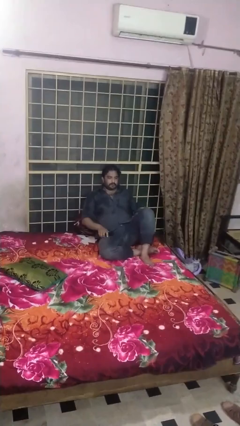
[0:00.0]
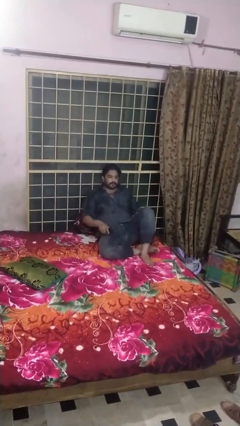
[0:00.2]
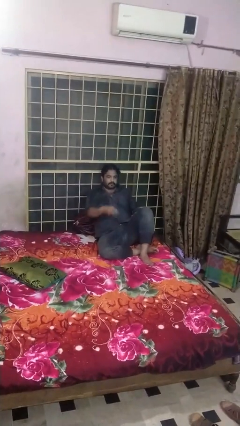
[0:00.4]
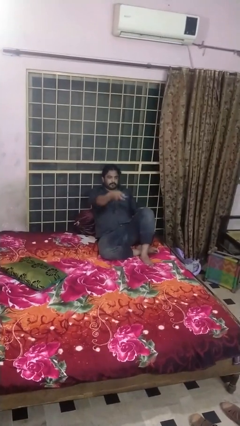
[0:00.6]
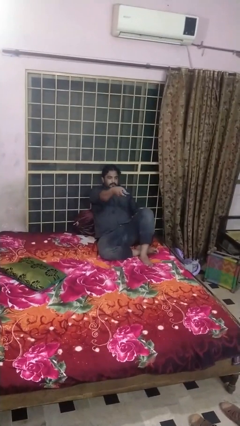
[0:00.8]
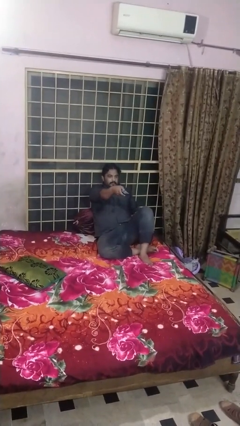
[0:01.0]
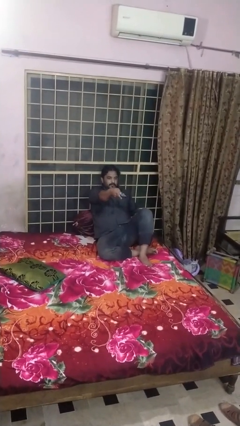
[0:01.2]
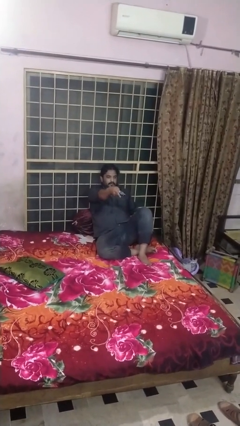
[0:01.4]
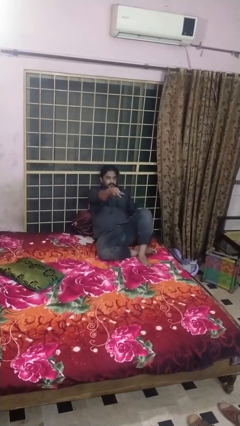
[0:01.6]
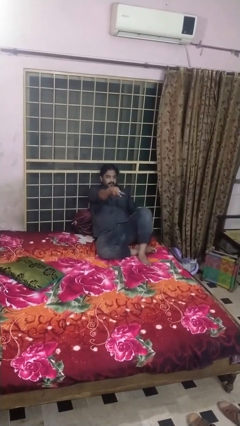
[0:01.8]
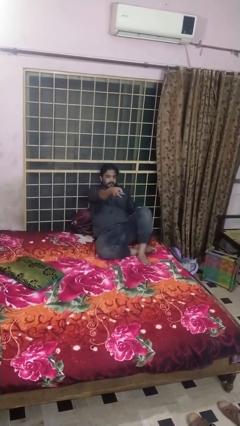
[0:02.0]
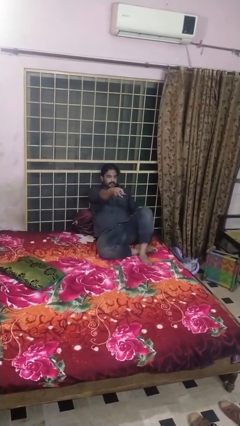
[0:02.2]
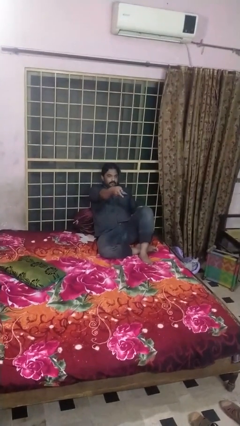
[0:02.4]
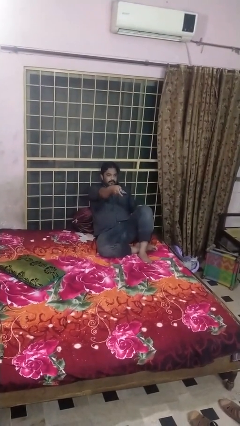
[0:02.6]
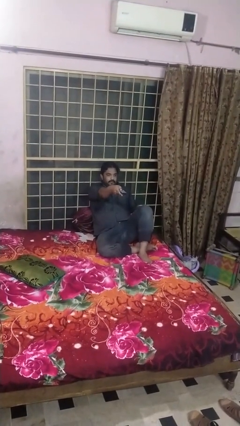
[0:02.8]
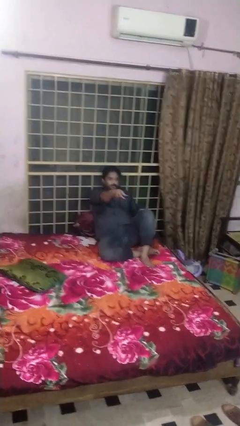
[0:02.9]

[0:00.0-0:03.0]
person uses television remote

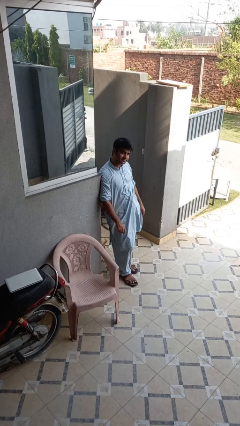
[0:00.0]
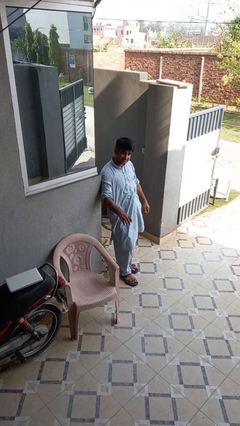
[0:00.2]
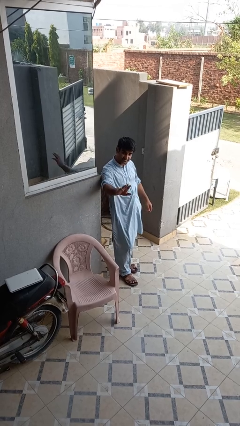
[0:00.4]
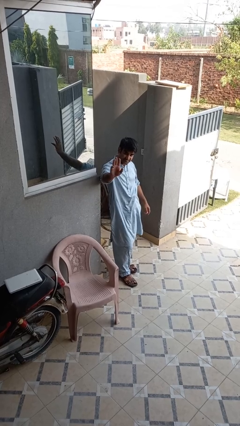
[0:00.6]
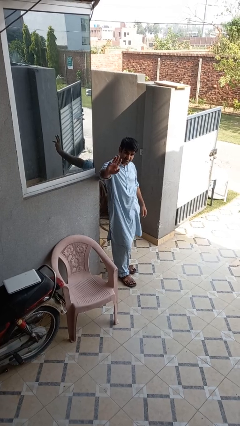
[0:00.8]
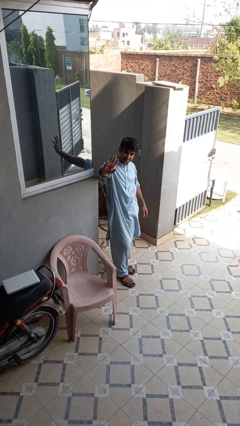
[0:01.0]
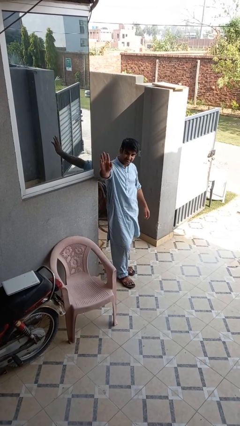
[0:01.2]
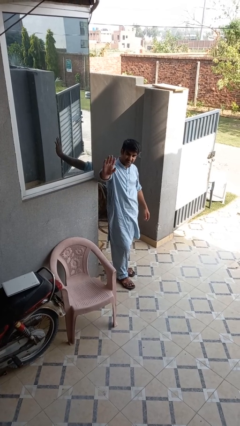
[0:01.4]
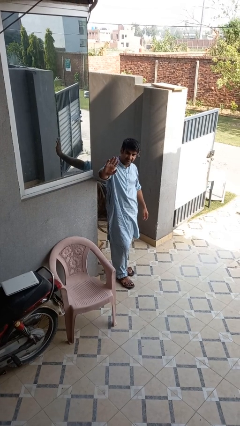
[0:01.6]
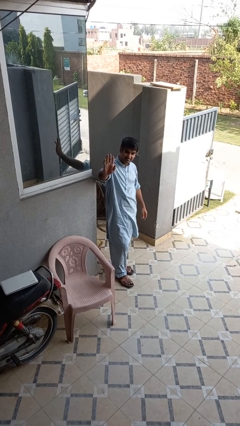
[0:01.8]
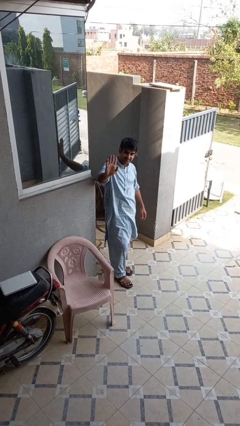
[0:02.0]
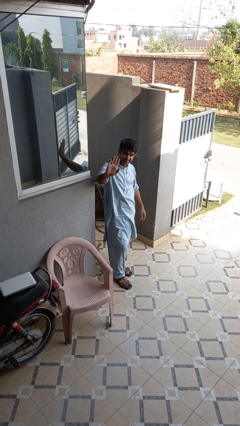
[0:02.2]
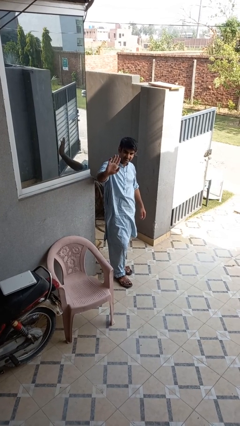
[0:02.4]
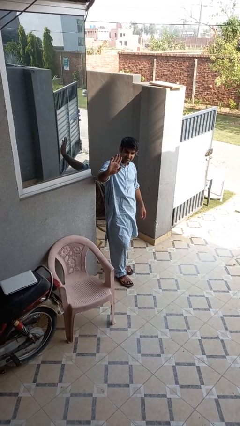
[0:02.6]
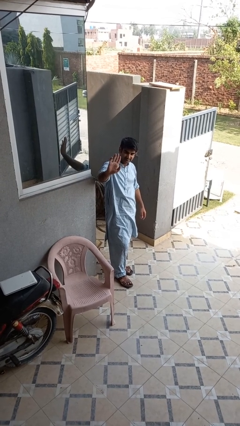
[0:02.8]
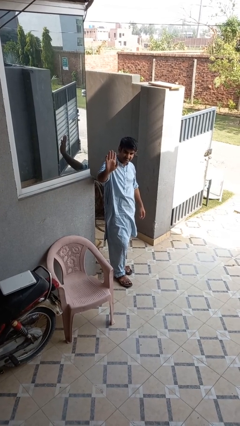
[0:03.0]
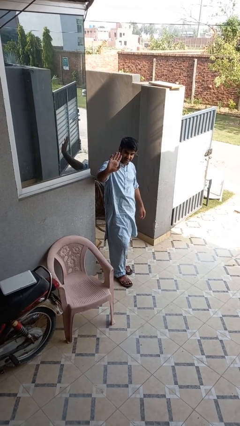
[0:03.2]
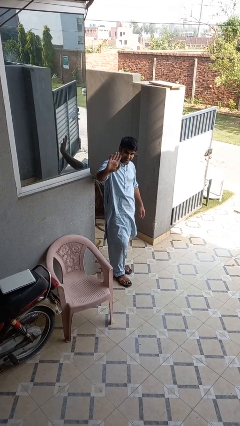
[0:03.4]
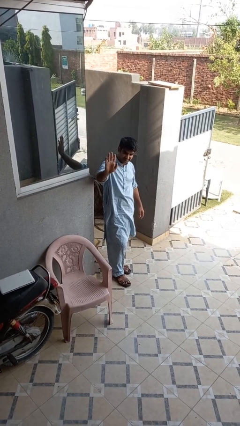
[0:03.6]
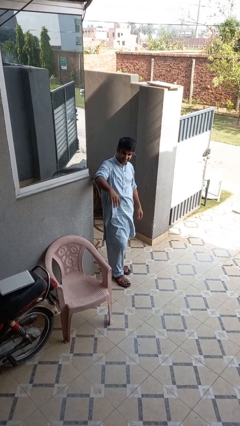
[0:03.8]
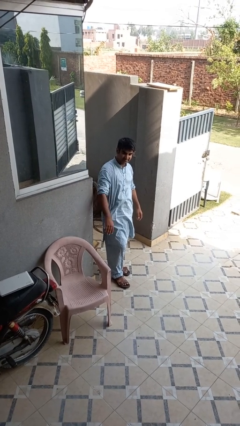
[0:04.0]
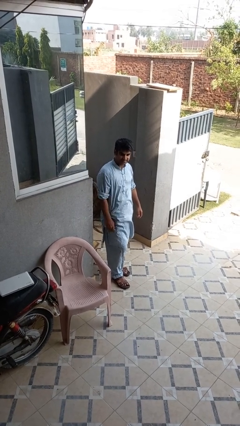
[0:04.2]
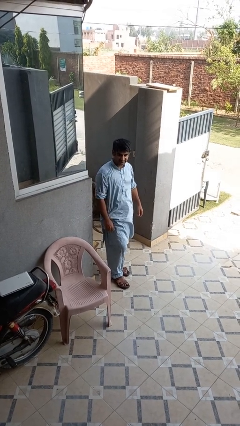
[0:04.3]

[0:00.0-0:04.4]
person waves at person

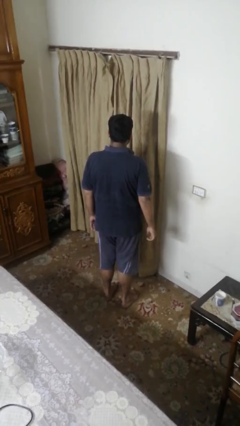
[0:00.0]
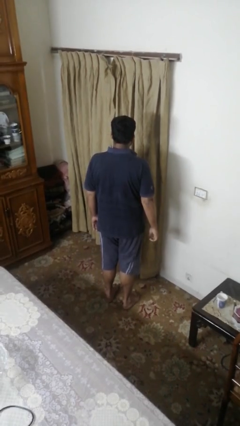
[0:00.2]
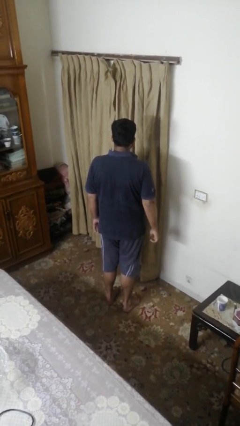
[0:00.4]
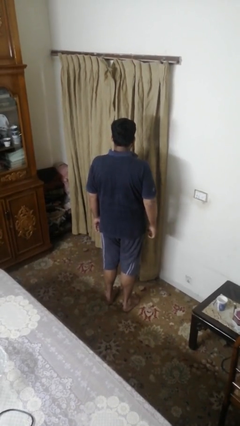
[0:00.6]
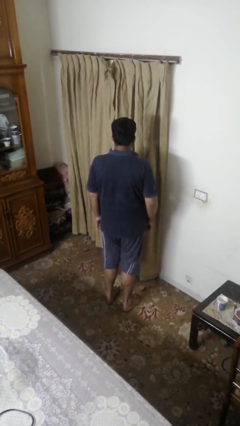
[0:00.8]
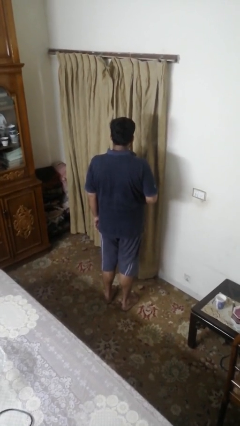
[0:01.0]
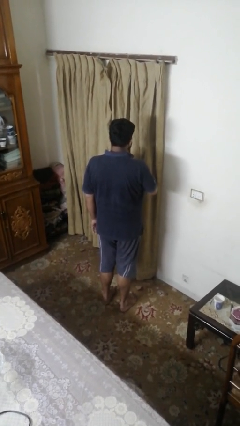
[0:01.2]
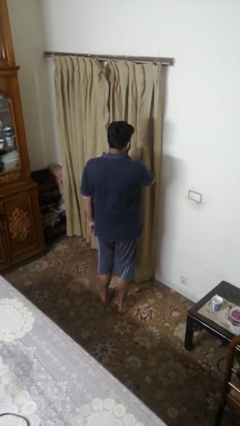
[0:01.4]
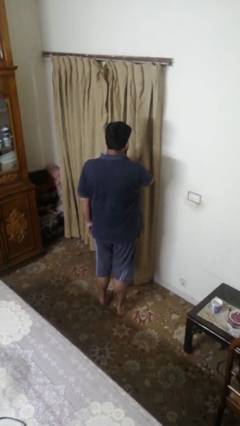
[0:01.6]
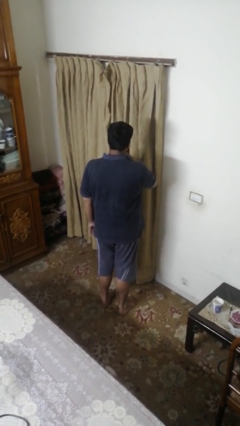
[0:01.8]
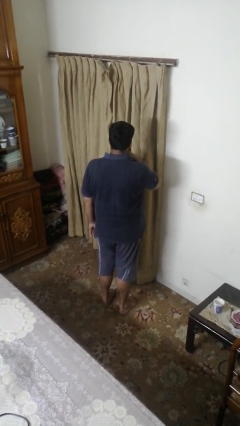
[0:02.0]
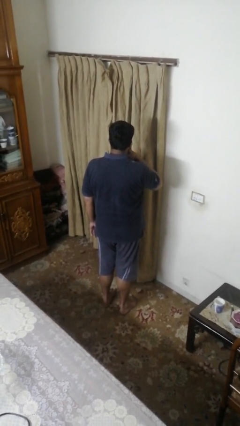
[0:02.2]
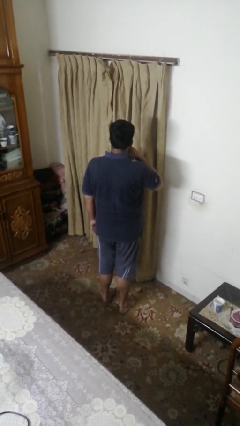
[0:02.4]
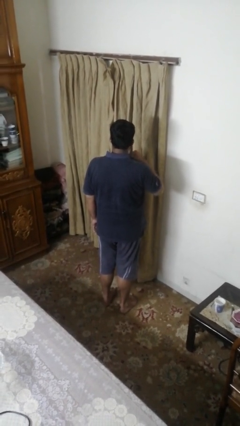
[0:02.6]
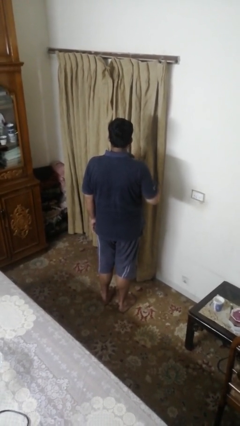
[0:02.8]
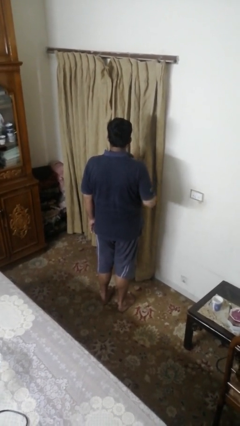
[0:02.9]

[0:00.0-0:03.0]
person gestures cut

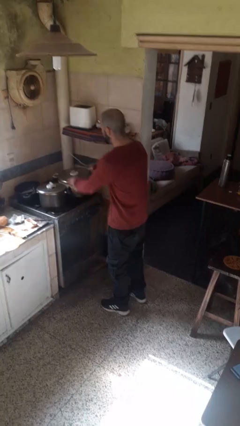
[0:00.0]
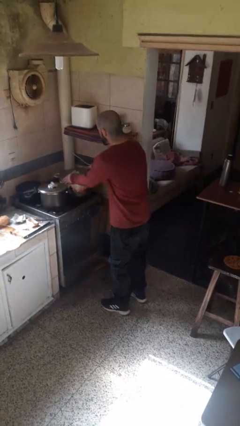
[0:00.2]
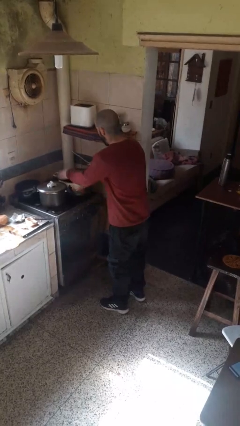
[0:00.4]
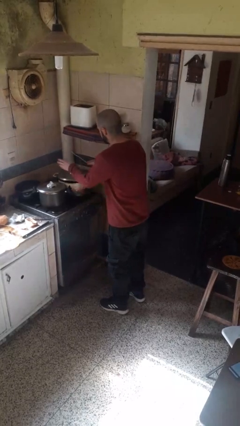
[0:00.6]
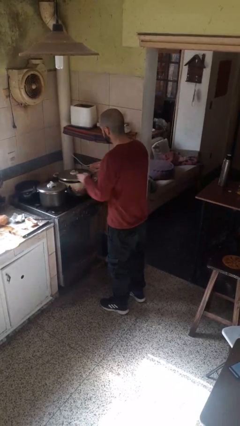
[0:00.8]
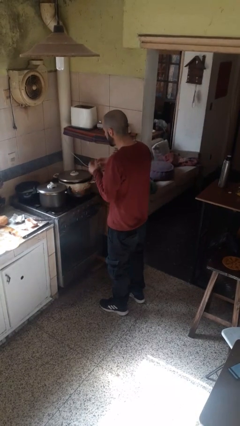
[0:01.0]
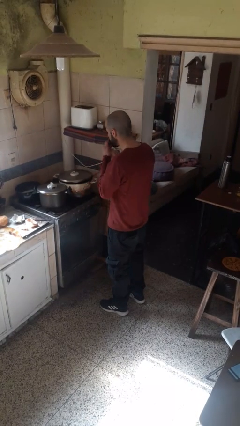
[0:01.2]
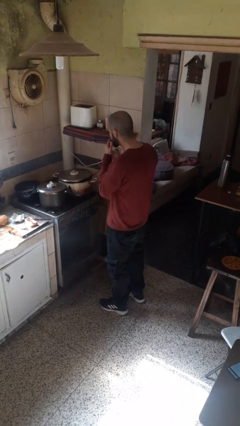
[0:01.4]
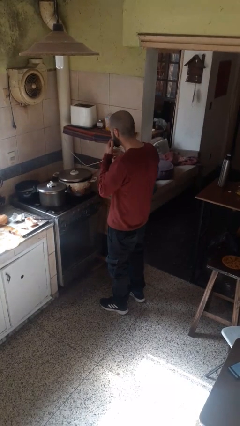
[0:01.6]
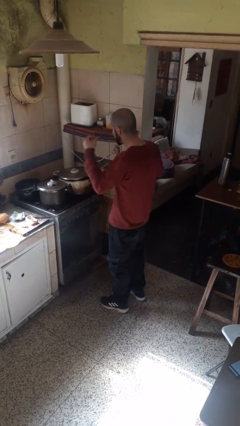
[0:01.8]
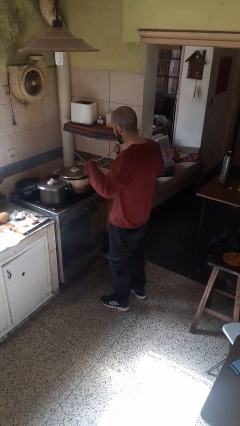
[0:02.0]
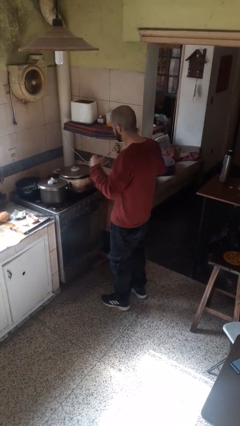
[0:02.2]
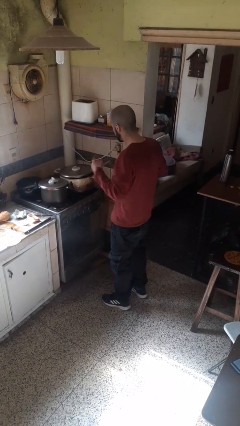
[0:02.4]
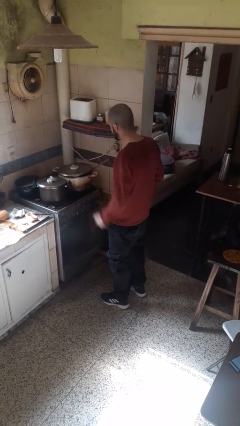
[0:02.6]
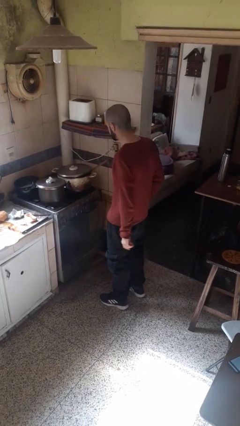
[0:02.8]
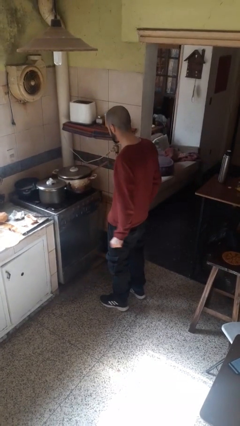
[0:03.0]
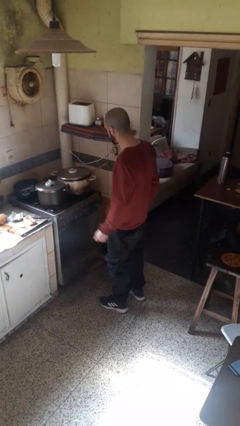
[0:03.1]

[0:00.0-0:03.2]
person burns hand

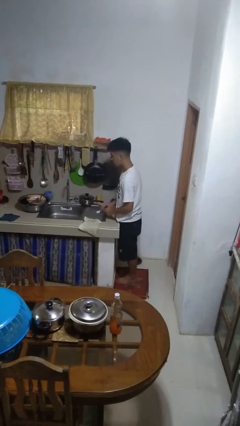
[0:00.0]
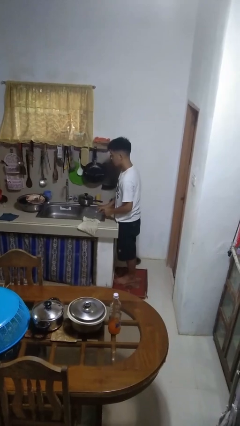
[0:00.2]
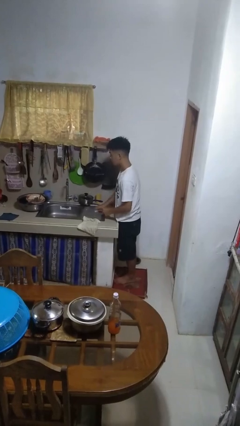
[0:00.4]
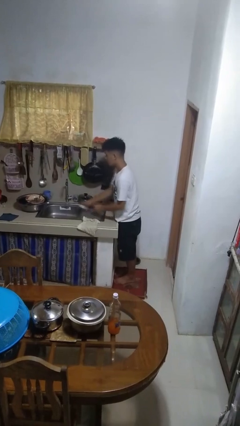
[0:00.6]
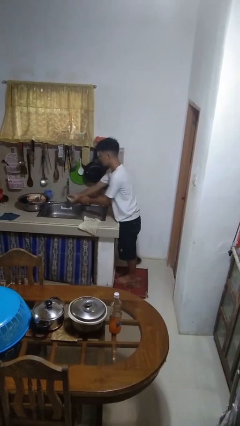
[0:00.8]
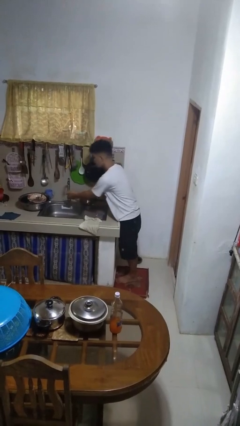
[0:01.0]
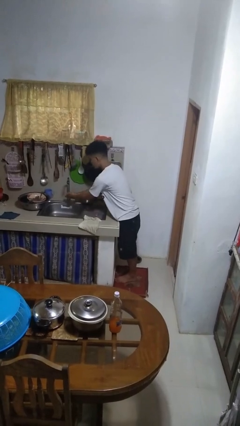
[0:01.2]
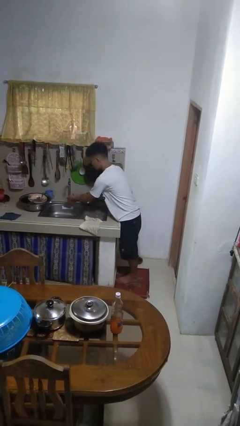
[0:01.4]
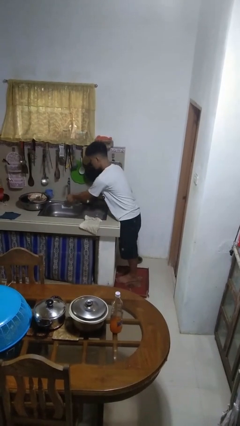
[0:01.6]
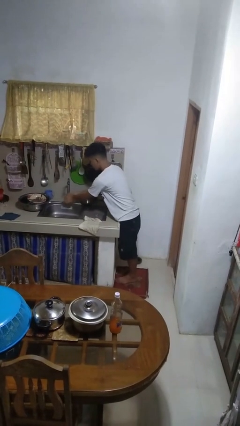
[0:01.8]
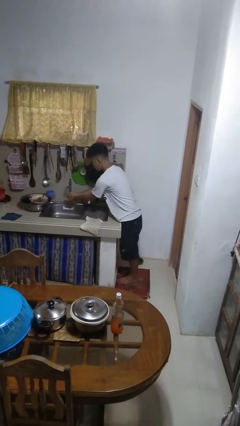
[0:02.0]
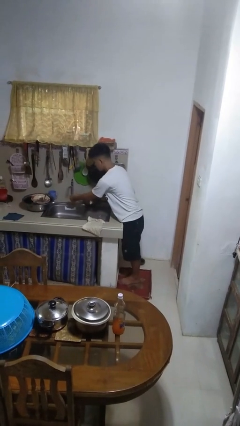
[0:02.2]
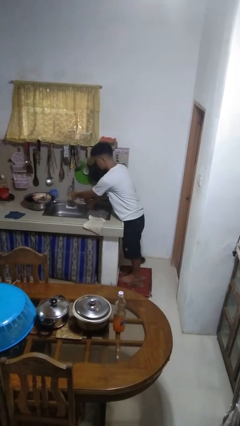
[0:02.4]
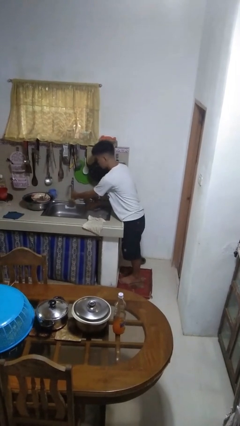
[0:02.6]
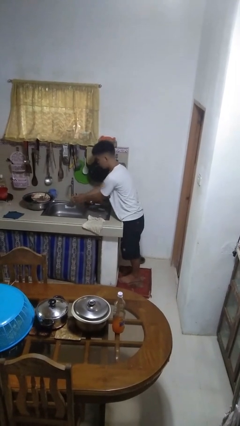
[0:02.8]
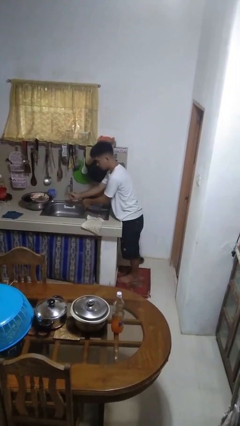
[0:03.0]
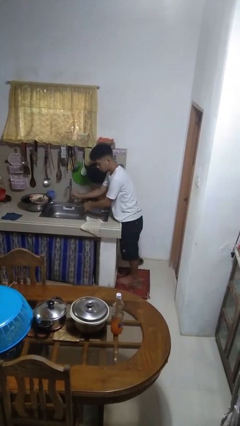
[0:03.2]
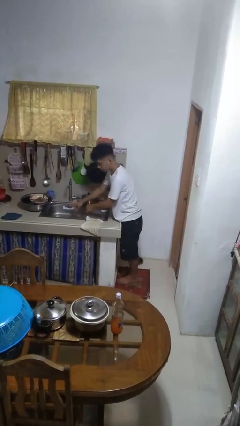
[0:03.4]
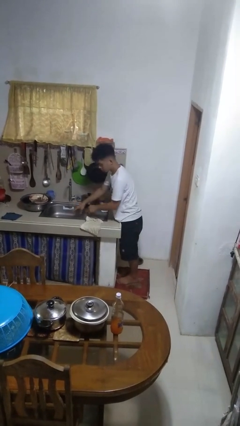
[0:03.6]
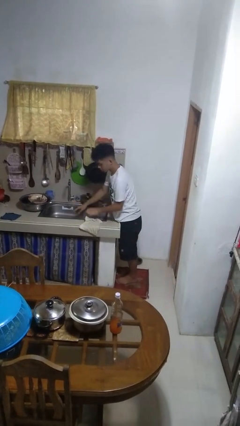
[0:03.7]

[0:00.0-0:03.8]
person washes hands

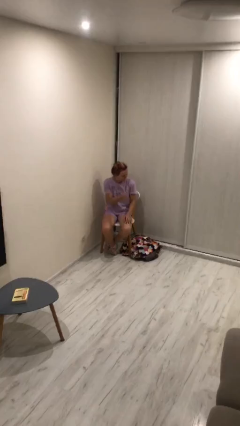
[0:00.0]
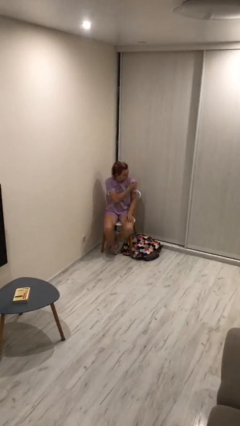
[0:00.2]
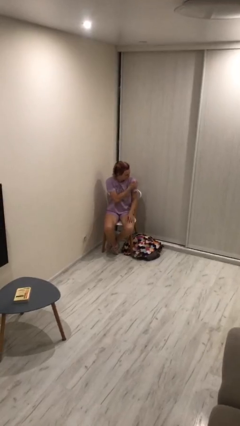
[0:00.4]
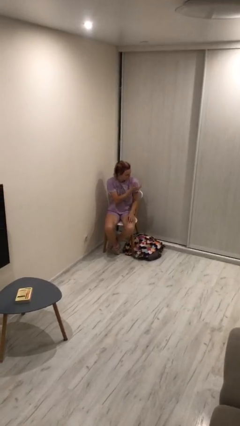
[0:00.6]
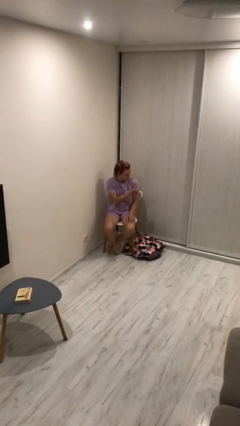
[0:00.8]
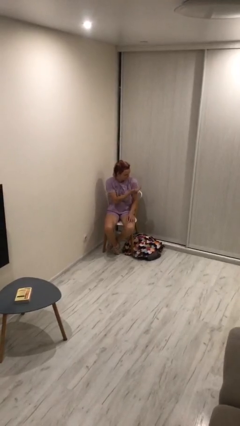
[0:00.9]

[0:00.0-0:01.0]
person swats bug
